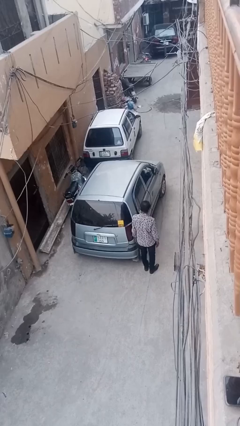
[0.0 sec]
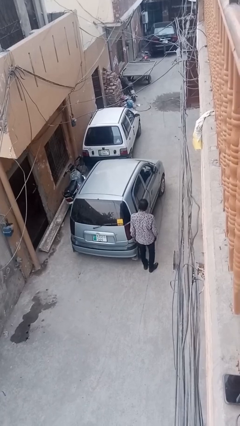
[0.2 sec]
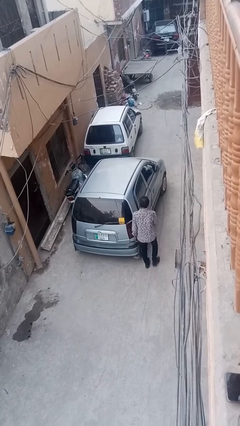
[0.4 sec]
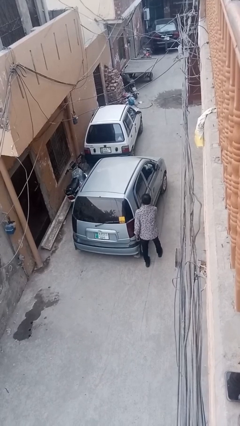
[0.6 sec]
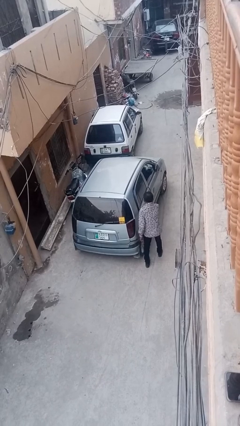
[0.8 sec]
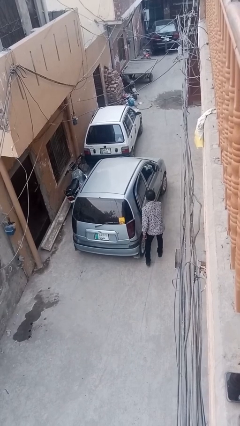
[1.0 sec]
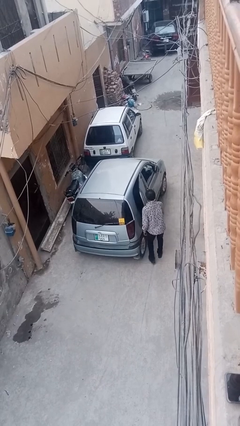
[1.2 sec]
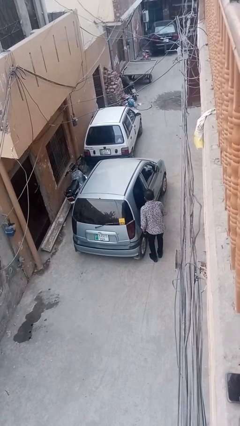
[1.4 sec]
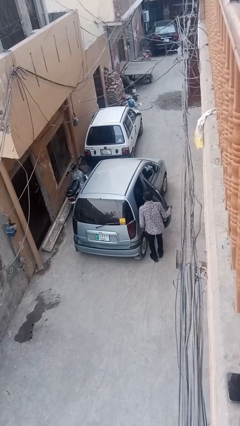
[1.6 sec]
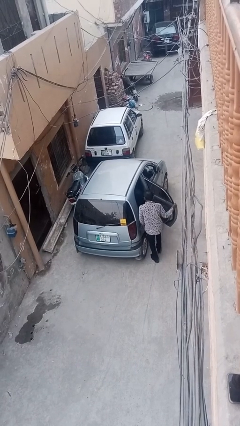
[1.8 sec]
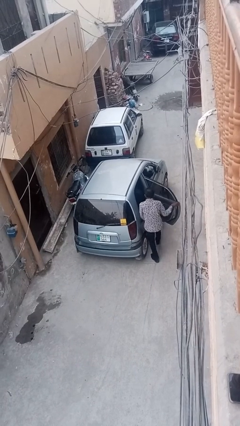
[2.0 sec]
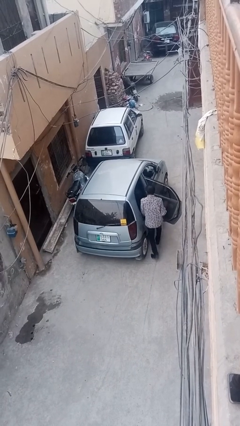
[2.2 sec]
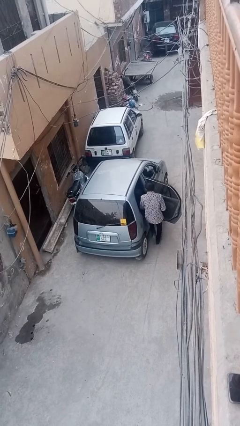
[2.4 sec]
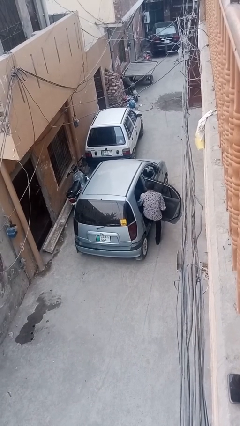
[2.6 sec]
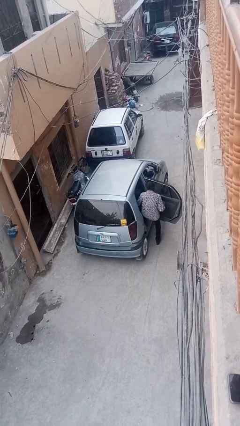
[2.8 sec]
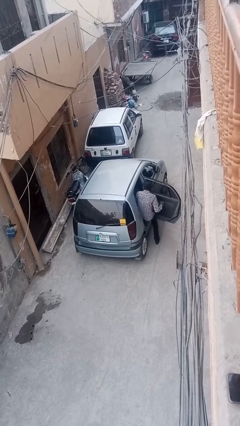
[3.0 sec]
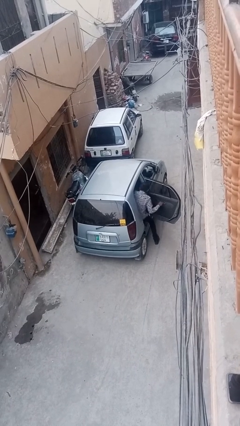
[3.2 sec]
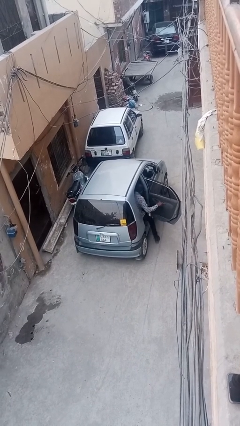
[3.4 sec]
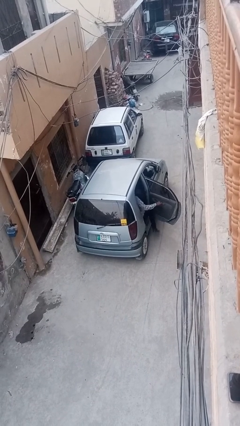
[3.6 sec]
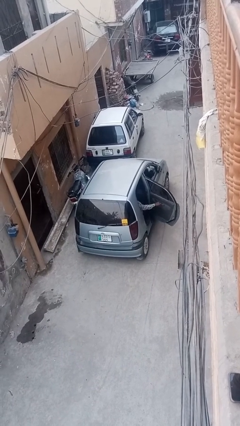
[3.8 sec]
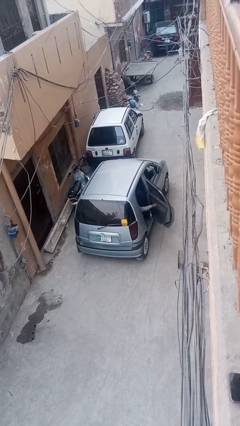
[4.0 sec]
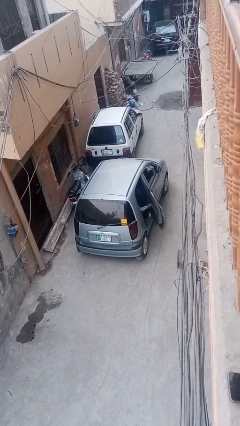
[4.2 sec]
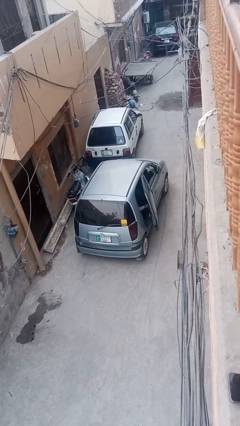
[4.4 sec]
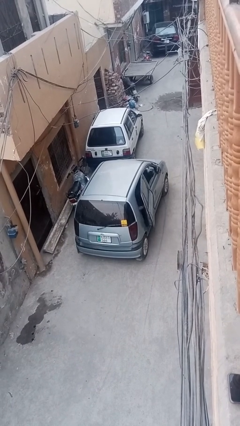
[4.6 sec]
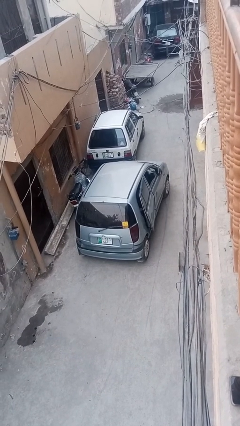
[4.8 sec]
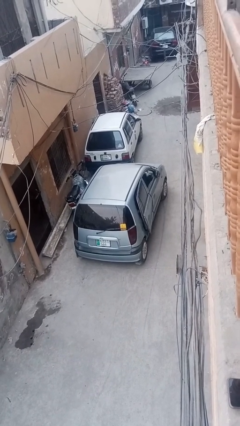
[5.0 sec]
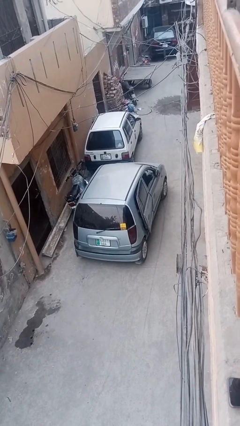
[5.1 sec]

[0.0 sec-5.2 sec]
car picks up person

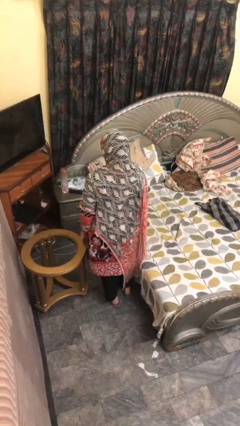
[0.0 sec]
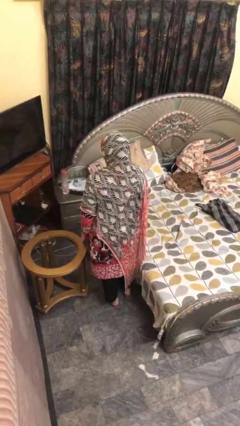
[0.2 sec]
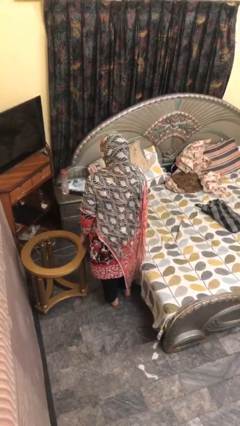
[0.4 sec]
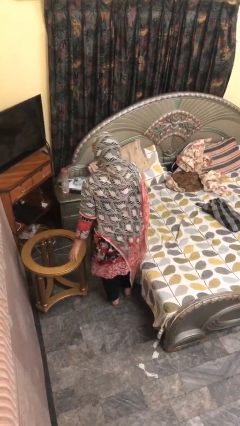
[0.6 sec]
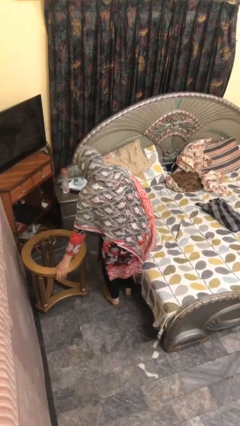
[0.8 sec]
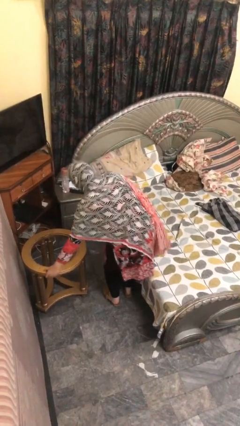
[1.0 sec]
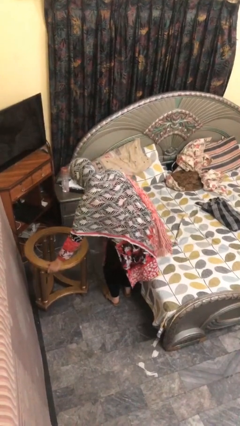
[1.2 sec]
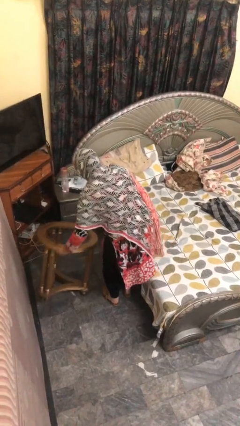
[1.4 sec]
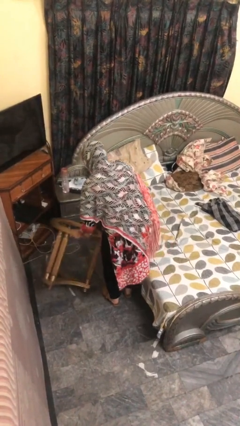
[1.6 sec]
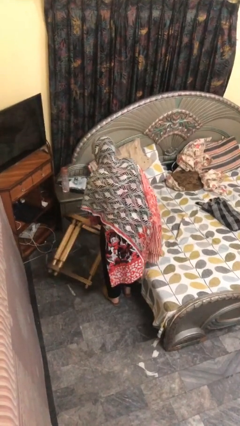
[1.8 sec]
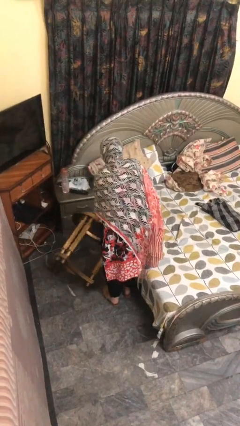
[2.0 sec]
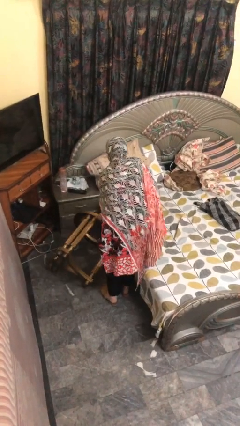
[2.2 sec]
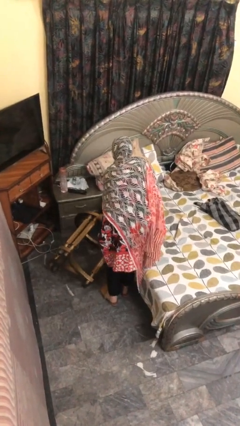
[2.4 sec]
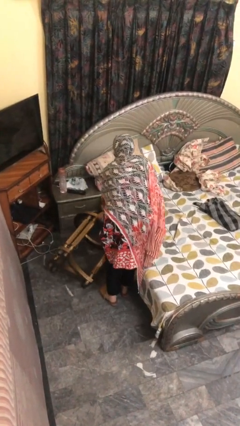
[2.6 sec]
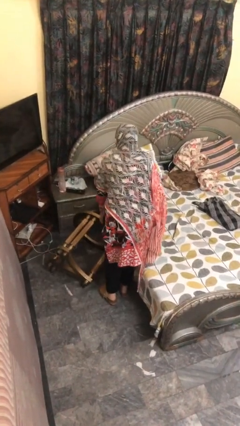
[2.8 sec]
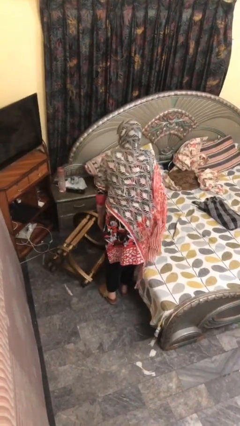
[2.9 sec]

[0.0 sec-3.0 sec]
person knocks over furniture

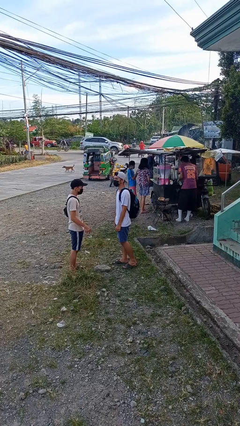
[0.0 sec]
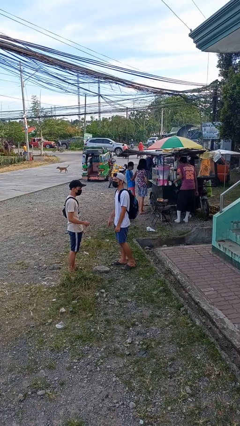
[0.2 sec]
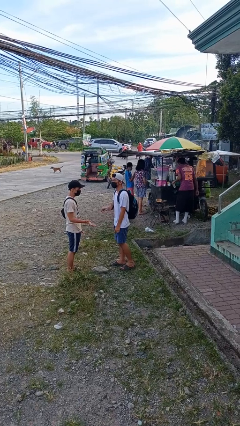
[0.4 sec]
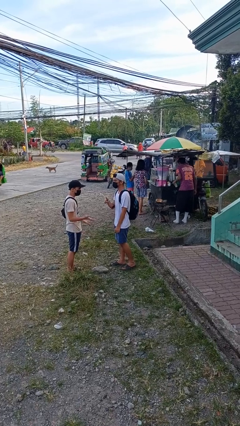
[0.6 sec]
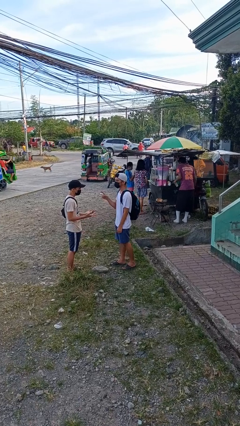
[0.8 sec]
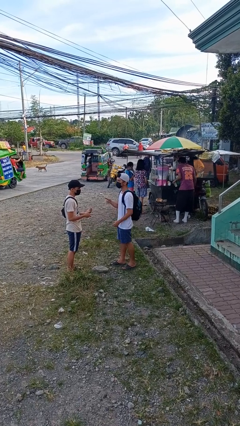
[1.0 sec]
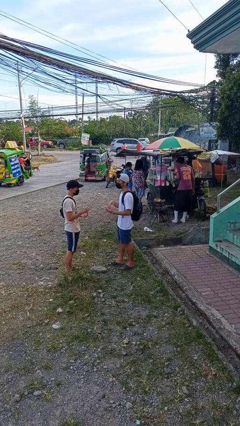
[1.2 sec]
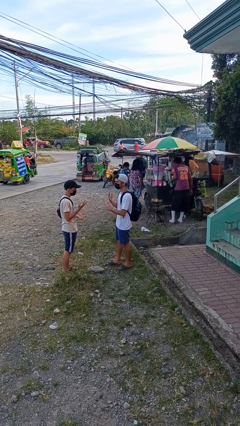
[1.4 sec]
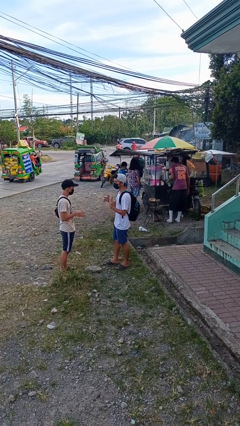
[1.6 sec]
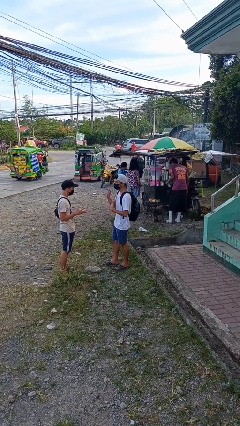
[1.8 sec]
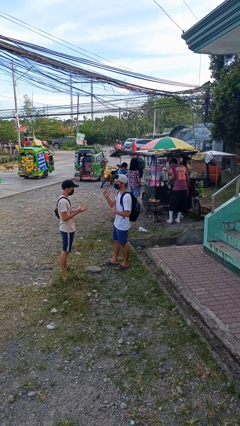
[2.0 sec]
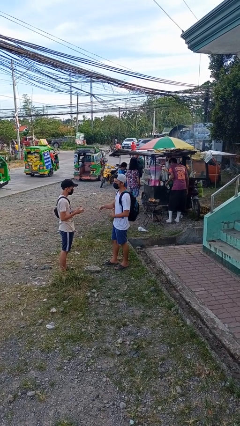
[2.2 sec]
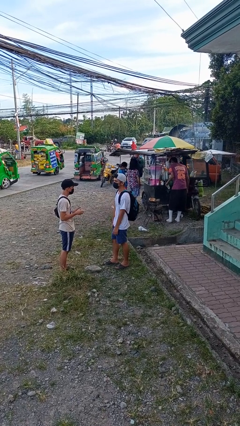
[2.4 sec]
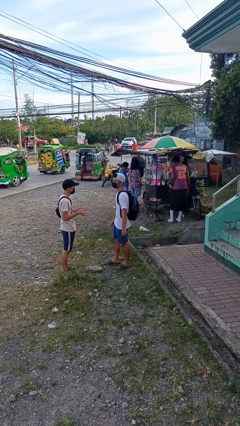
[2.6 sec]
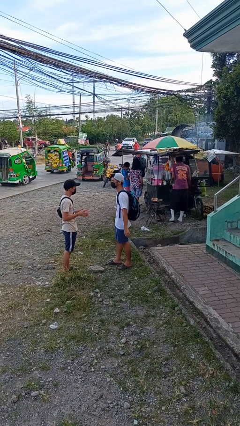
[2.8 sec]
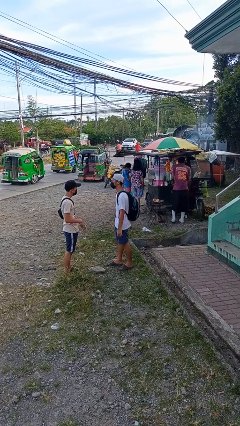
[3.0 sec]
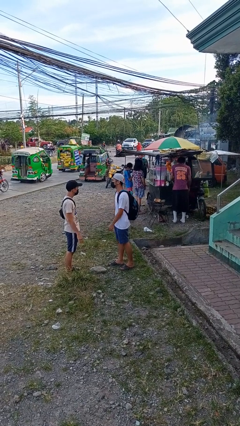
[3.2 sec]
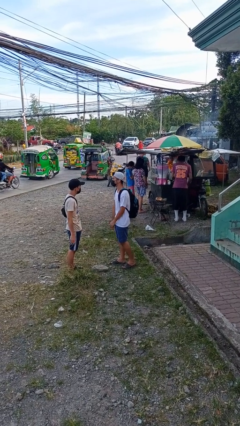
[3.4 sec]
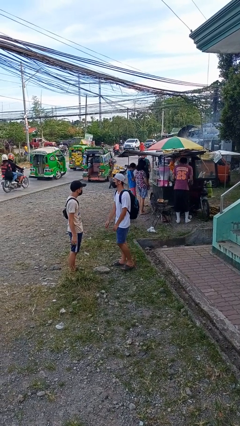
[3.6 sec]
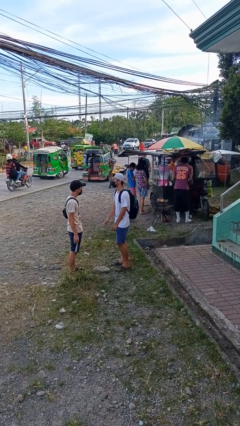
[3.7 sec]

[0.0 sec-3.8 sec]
person talks to person

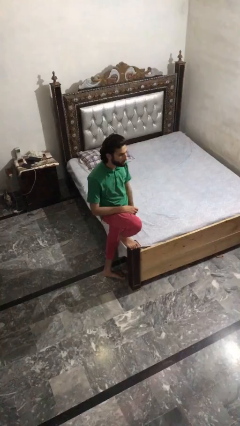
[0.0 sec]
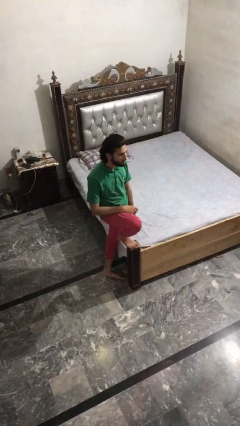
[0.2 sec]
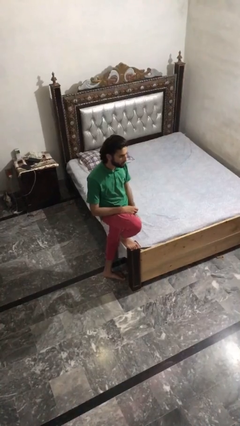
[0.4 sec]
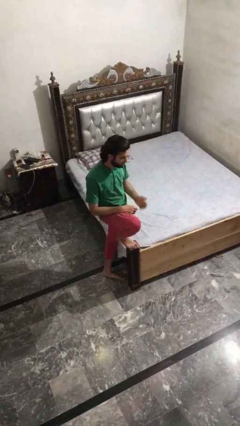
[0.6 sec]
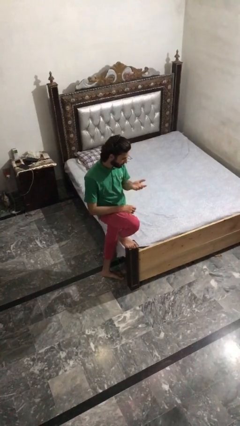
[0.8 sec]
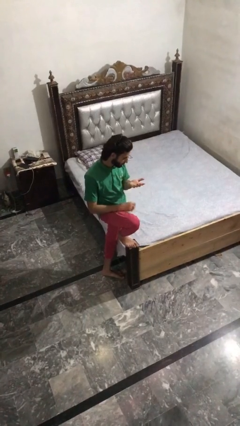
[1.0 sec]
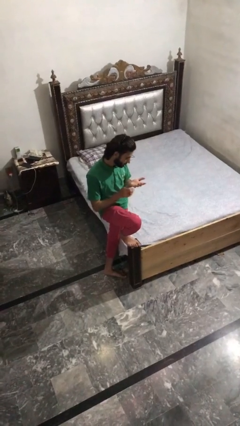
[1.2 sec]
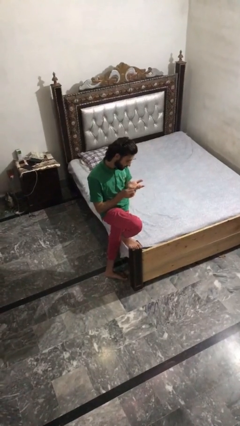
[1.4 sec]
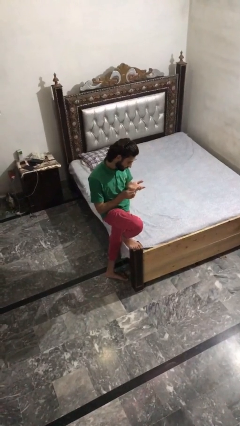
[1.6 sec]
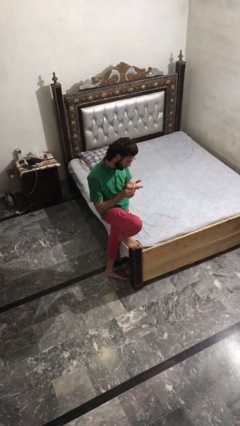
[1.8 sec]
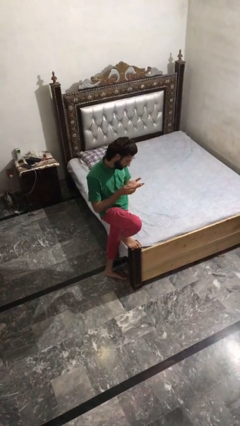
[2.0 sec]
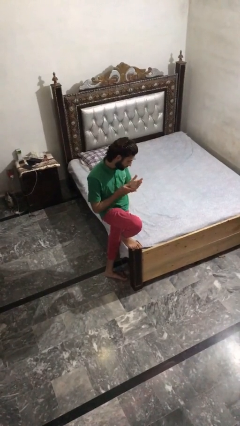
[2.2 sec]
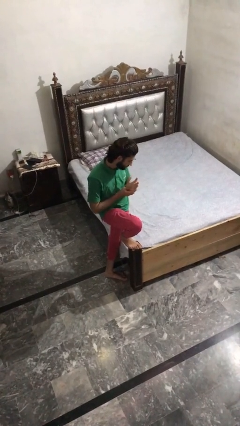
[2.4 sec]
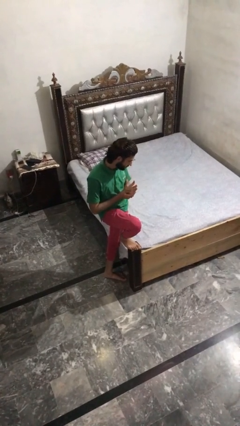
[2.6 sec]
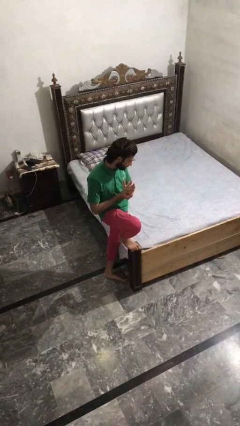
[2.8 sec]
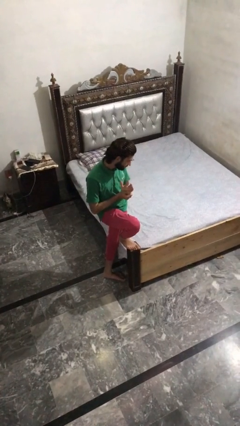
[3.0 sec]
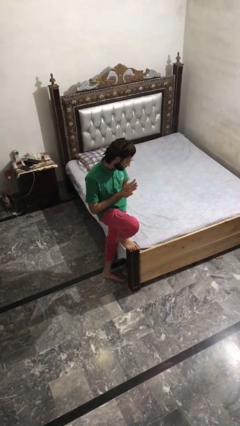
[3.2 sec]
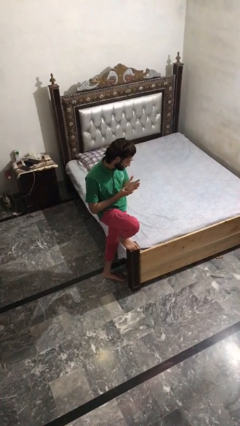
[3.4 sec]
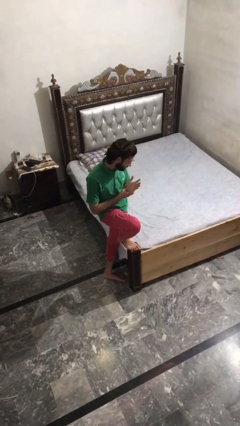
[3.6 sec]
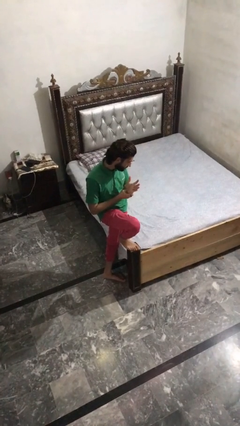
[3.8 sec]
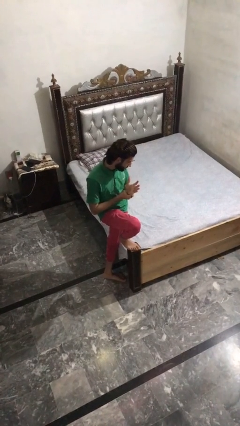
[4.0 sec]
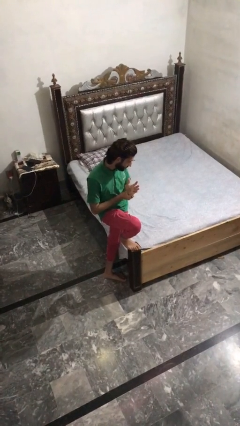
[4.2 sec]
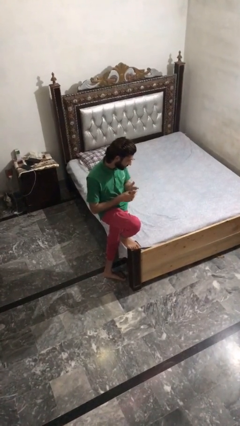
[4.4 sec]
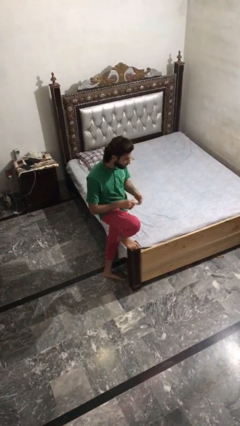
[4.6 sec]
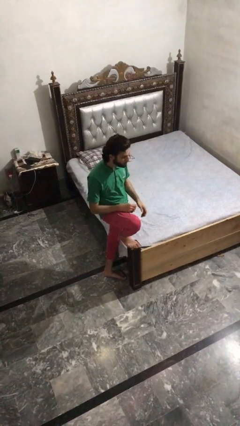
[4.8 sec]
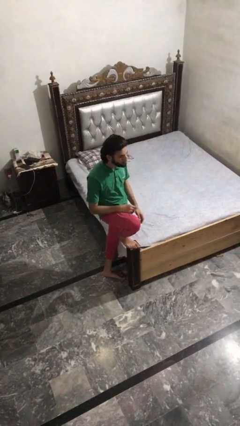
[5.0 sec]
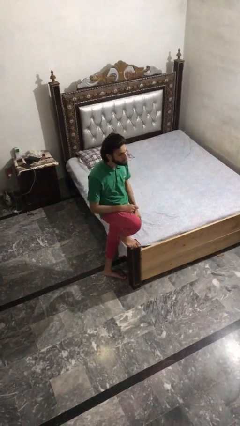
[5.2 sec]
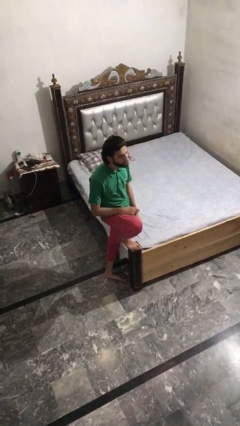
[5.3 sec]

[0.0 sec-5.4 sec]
person looks at hands in lap

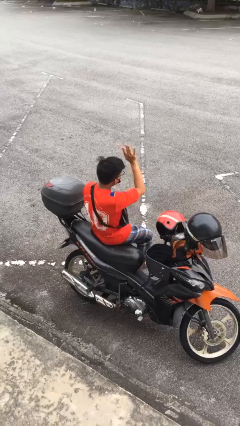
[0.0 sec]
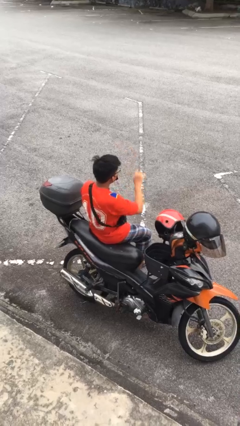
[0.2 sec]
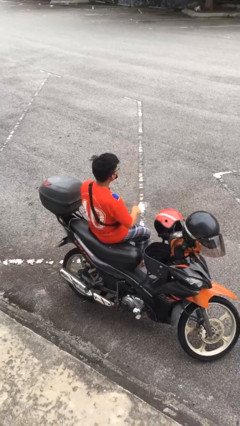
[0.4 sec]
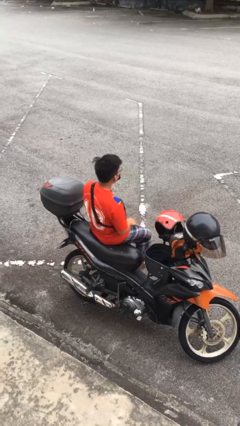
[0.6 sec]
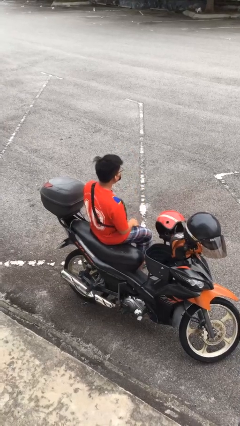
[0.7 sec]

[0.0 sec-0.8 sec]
person gestures lower hand
